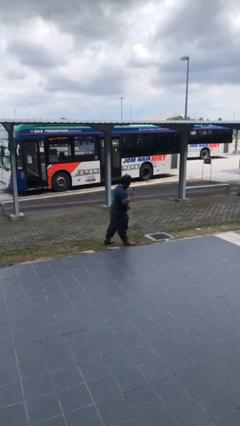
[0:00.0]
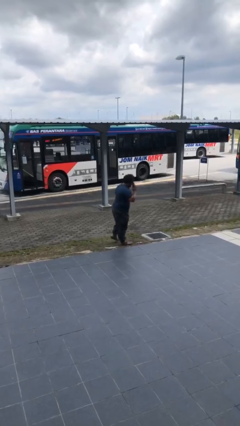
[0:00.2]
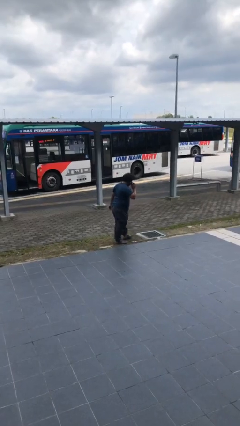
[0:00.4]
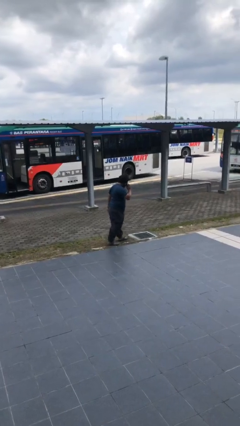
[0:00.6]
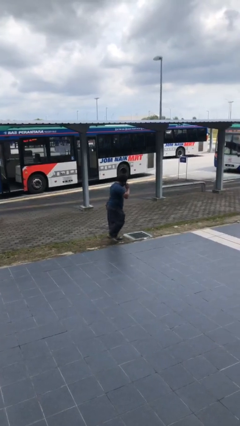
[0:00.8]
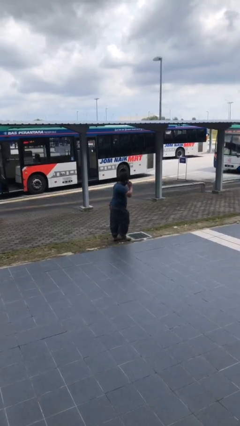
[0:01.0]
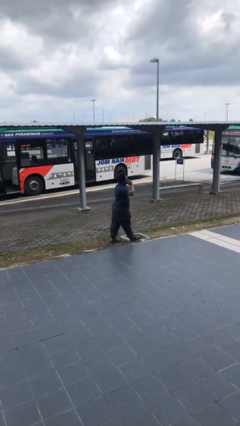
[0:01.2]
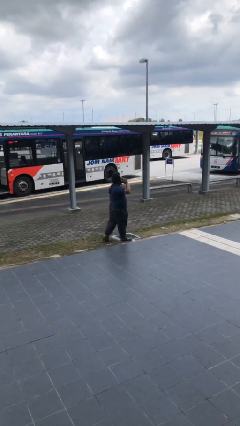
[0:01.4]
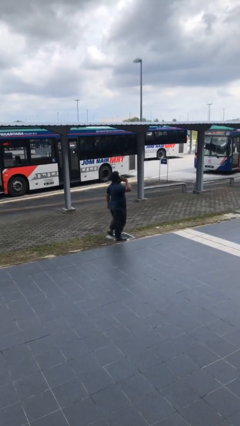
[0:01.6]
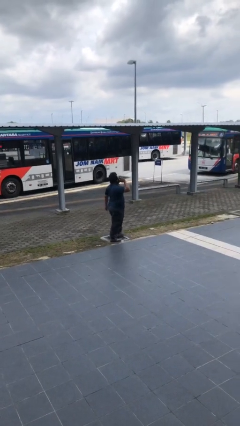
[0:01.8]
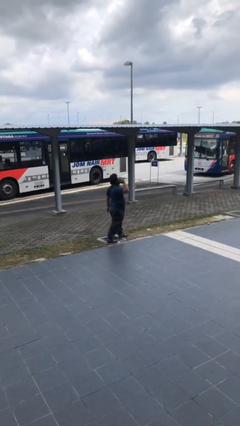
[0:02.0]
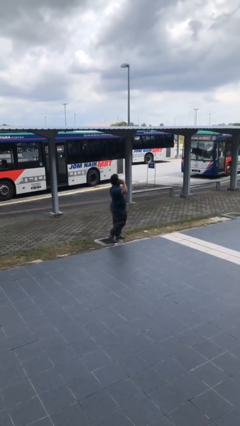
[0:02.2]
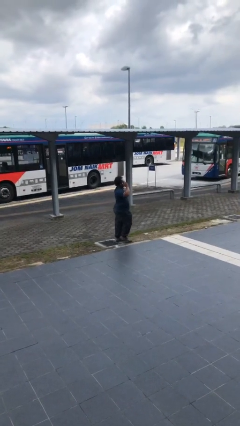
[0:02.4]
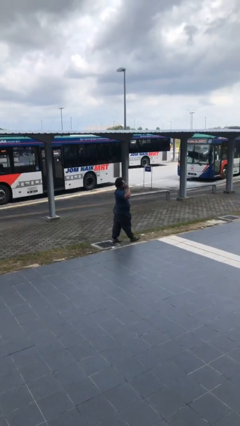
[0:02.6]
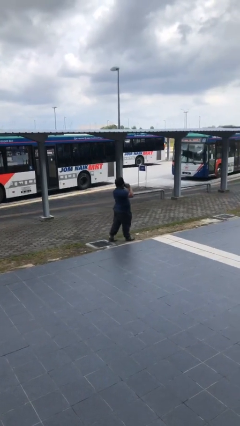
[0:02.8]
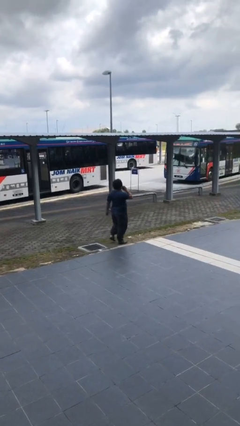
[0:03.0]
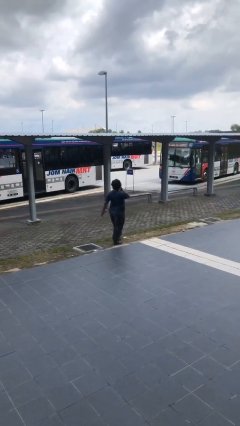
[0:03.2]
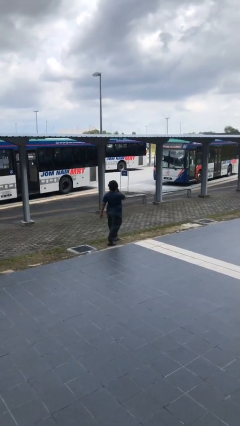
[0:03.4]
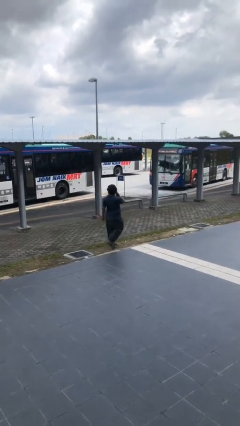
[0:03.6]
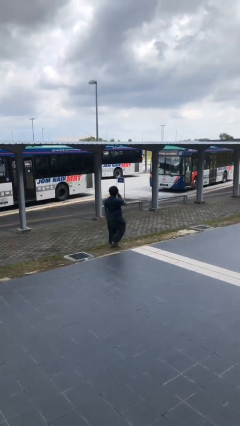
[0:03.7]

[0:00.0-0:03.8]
person talks on phone

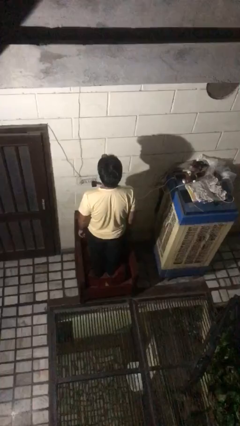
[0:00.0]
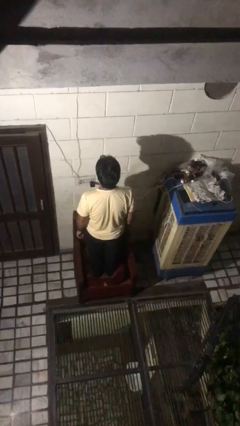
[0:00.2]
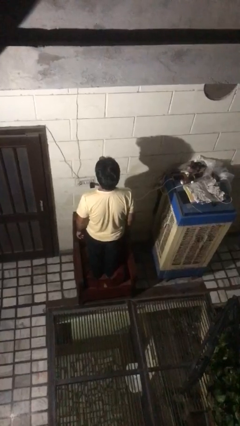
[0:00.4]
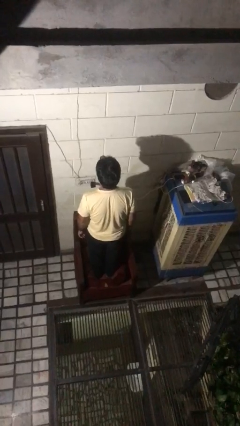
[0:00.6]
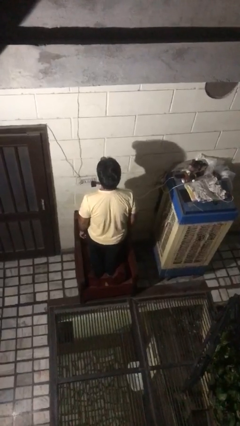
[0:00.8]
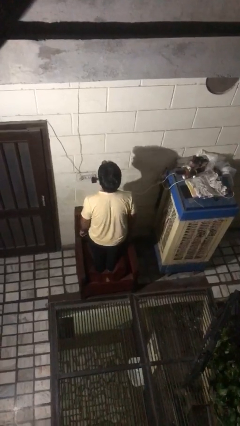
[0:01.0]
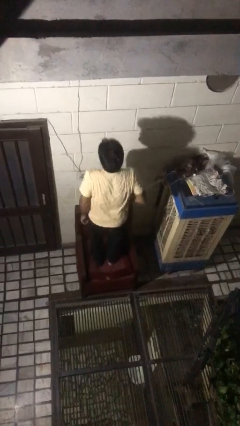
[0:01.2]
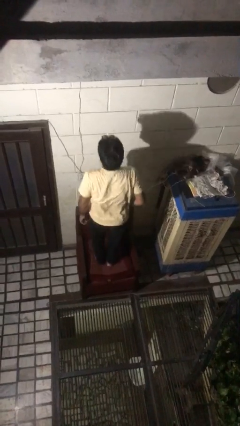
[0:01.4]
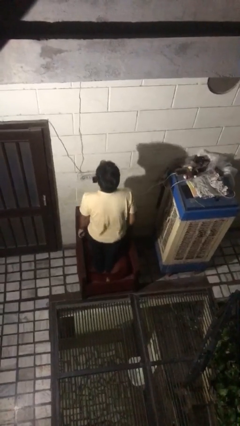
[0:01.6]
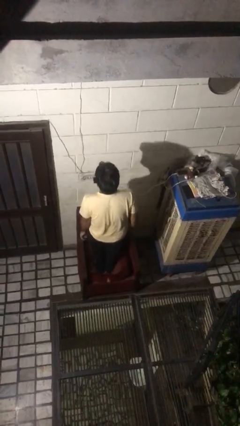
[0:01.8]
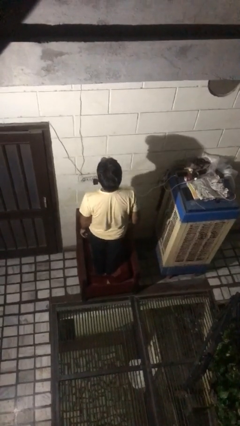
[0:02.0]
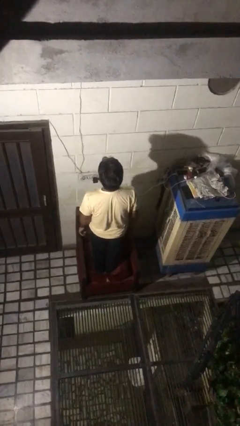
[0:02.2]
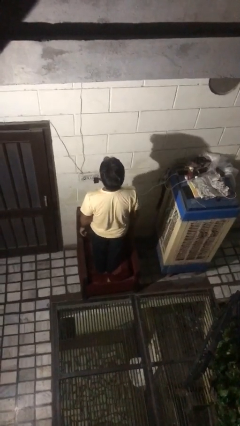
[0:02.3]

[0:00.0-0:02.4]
person jumps on couch

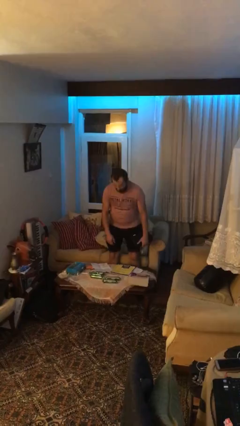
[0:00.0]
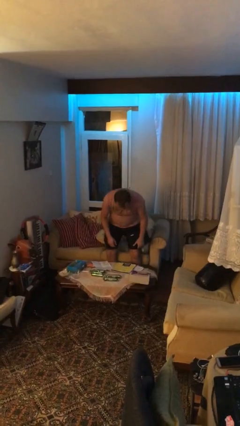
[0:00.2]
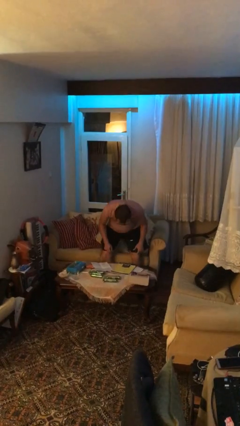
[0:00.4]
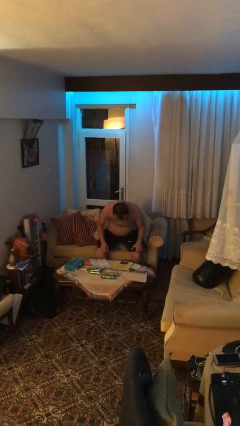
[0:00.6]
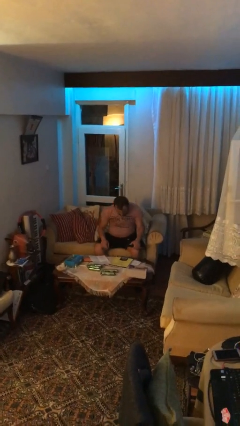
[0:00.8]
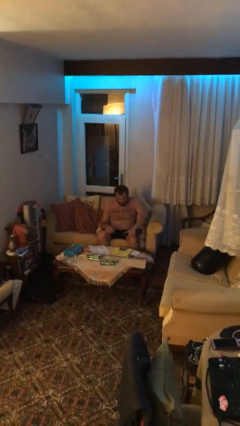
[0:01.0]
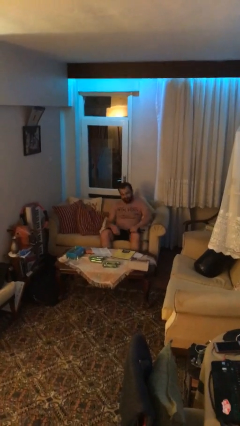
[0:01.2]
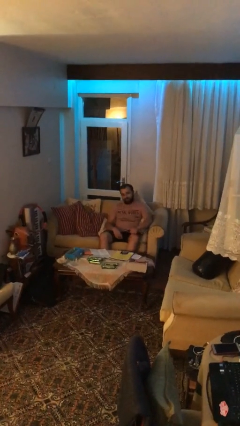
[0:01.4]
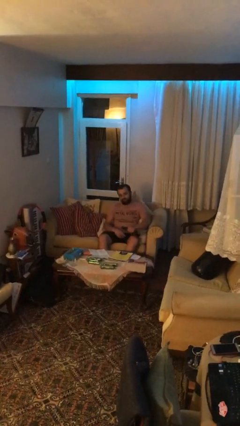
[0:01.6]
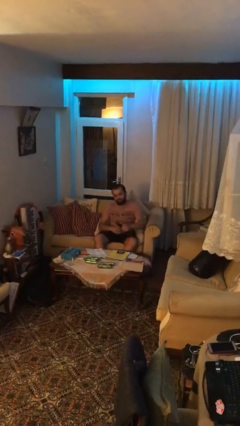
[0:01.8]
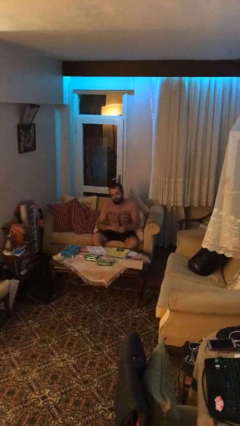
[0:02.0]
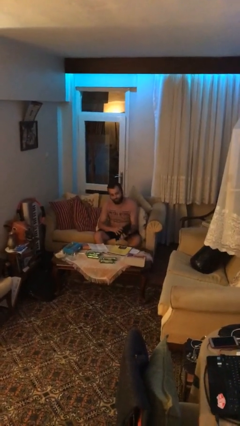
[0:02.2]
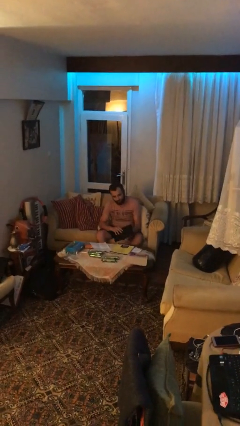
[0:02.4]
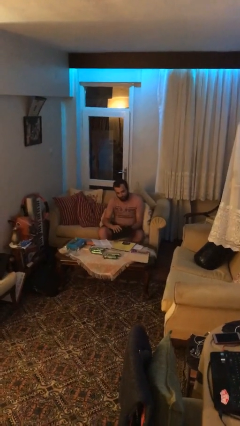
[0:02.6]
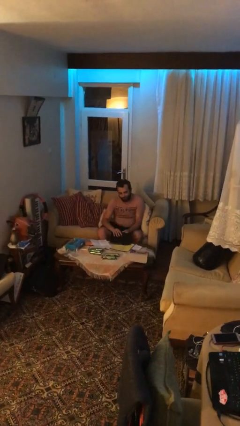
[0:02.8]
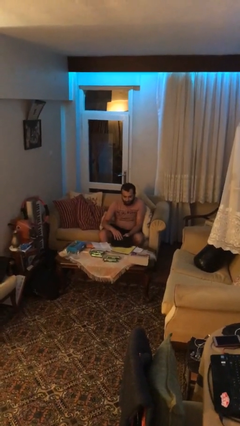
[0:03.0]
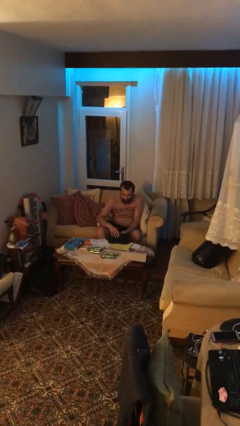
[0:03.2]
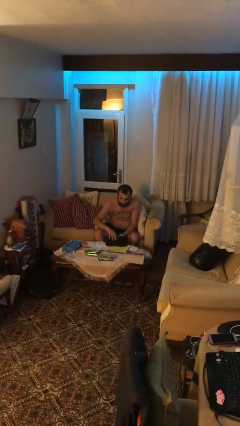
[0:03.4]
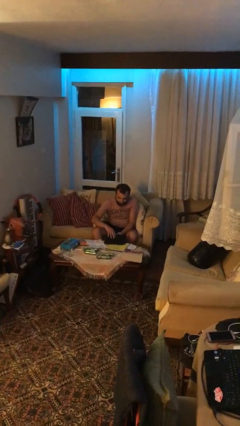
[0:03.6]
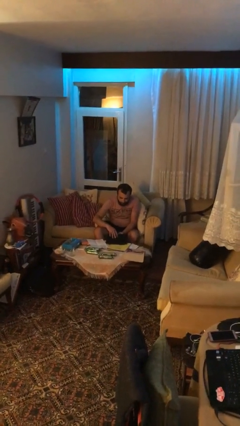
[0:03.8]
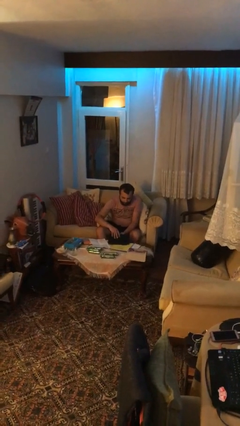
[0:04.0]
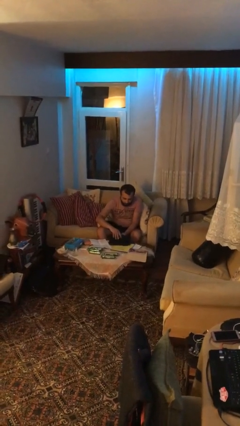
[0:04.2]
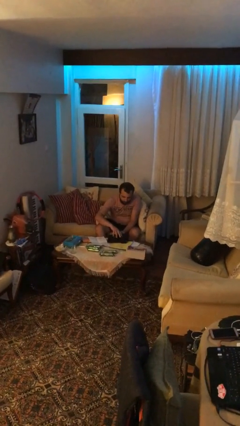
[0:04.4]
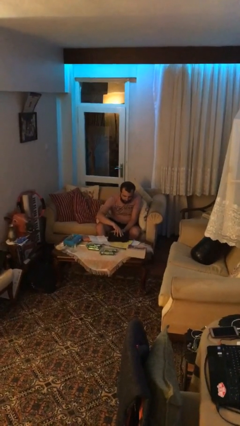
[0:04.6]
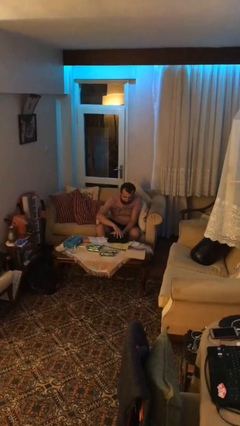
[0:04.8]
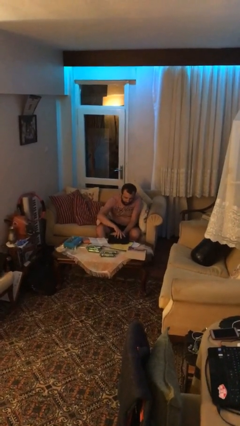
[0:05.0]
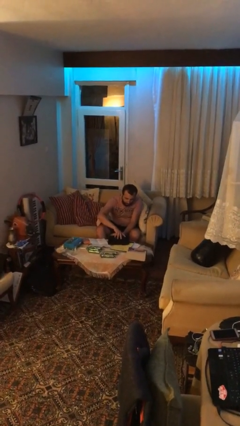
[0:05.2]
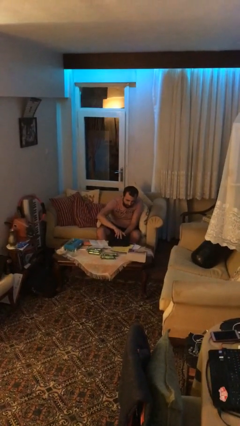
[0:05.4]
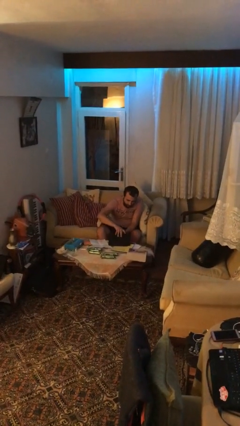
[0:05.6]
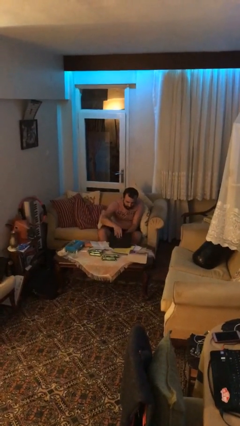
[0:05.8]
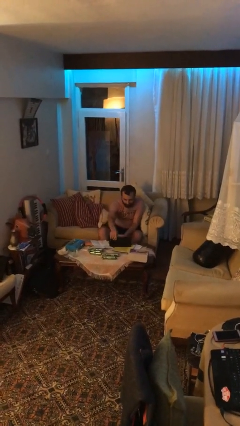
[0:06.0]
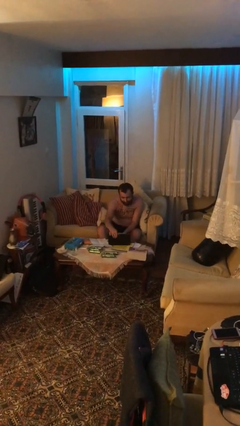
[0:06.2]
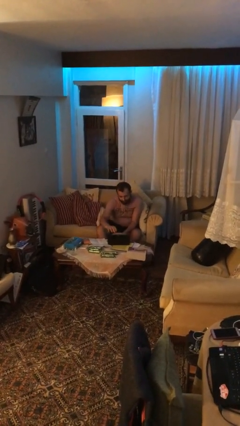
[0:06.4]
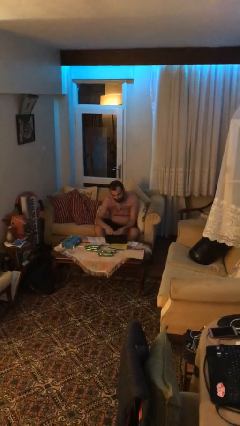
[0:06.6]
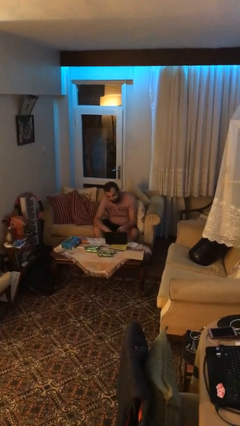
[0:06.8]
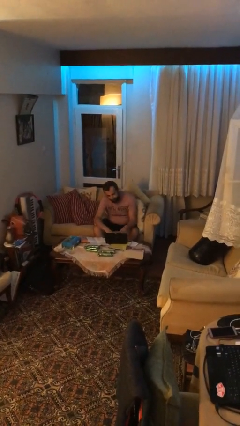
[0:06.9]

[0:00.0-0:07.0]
person sits down

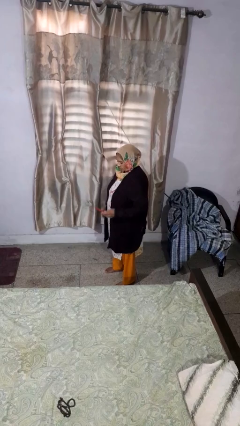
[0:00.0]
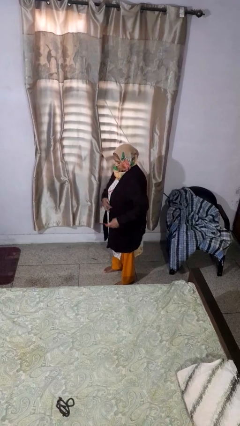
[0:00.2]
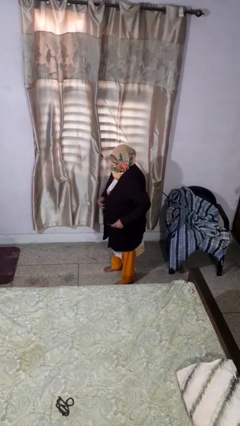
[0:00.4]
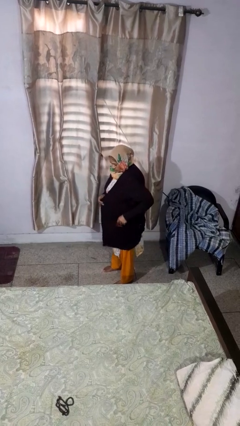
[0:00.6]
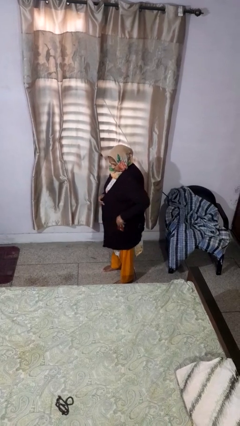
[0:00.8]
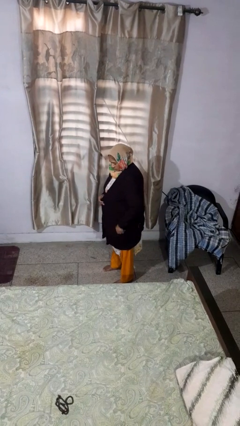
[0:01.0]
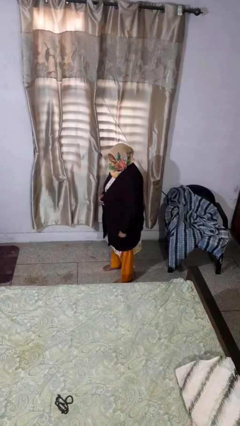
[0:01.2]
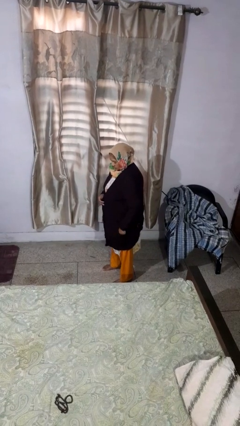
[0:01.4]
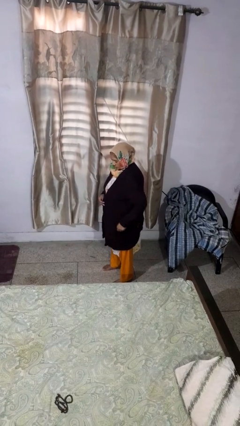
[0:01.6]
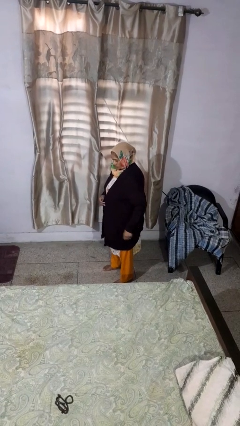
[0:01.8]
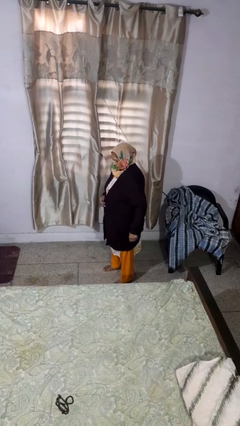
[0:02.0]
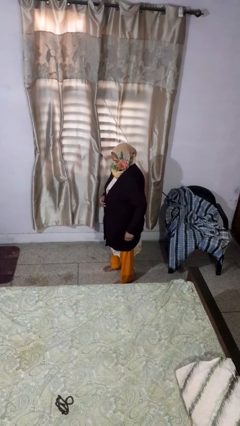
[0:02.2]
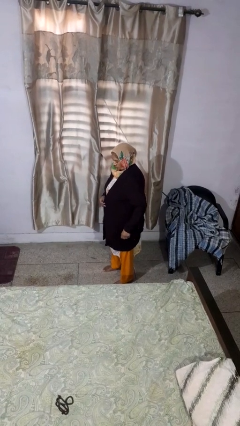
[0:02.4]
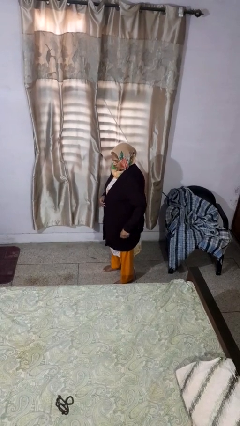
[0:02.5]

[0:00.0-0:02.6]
person puts phone into pocket

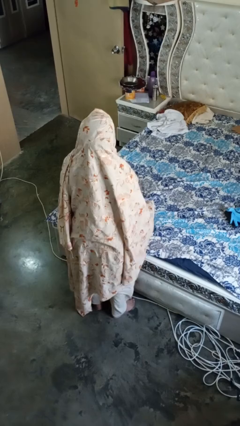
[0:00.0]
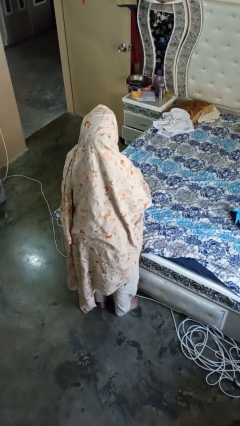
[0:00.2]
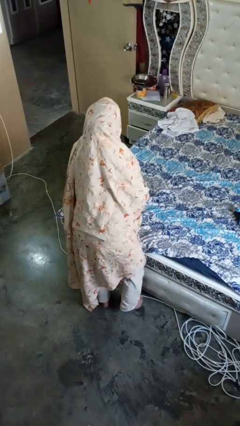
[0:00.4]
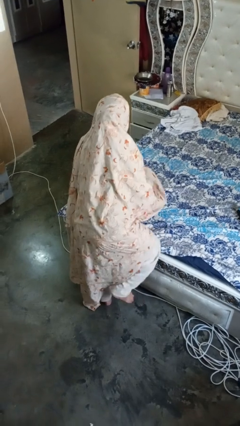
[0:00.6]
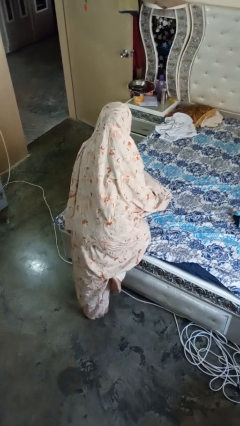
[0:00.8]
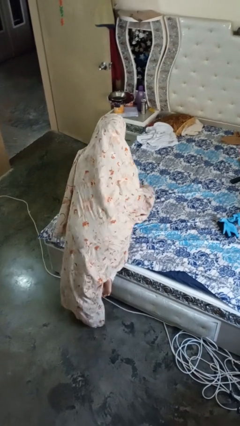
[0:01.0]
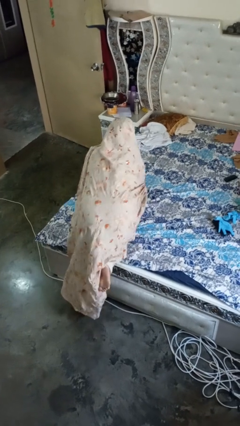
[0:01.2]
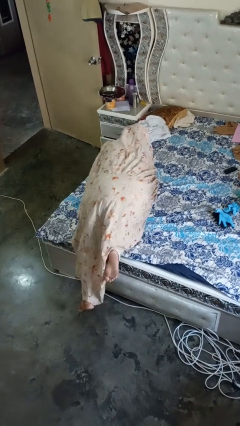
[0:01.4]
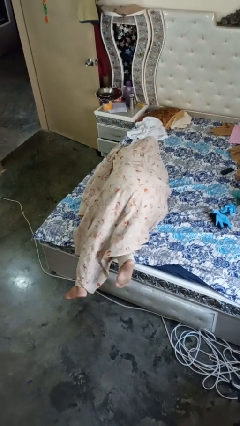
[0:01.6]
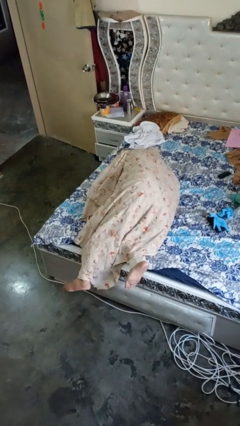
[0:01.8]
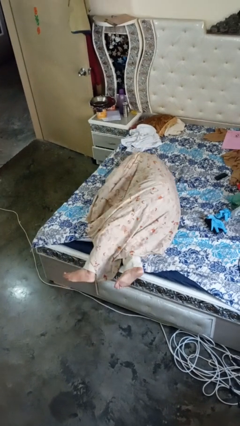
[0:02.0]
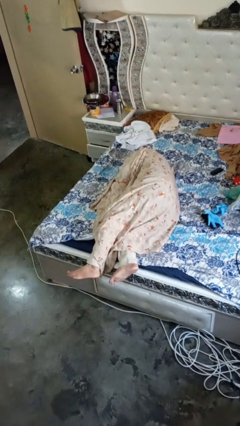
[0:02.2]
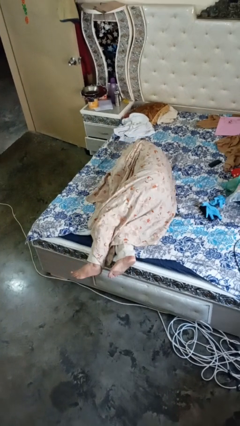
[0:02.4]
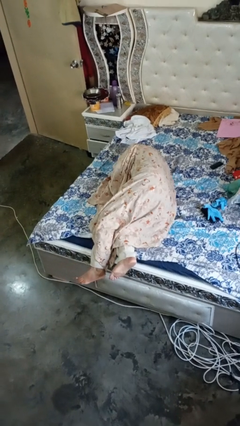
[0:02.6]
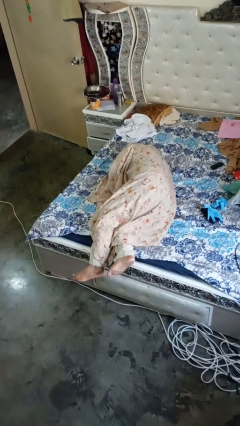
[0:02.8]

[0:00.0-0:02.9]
person lies down on bed
